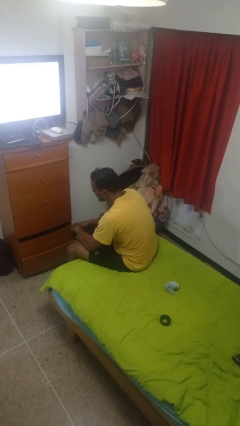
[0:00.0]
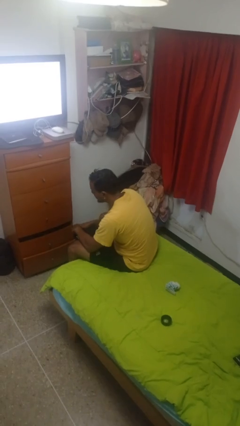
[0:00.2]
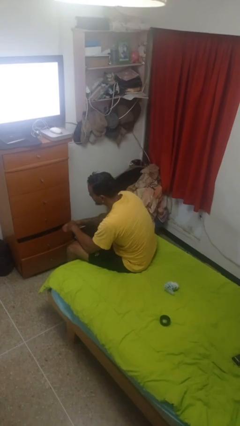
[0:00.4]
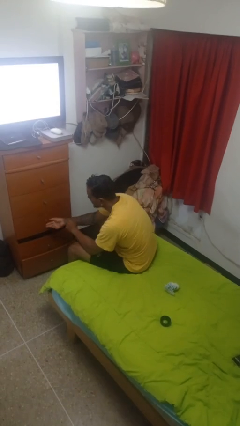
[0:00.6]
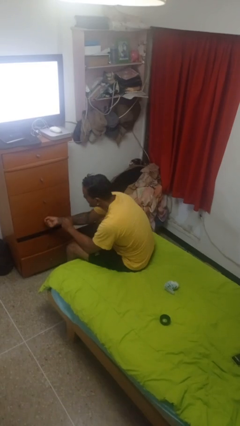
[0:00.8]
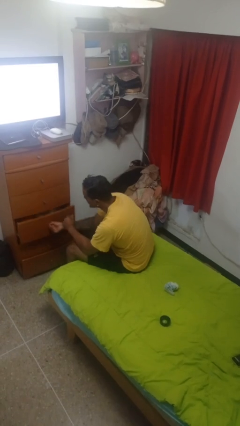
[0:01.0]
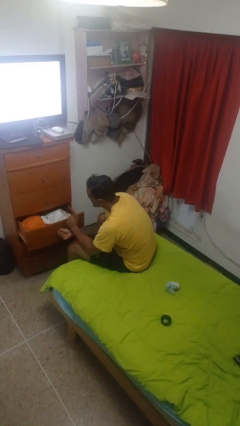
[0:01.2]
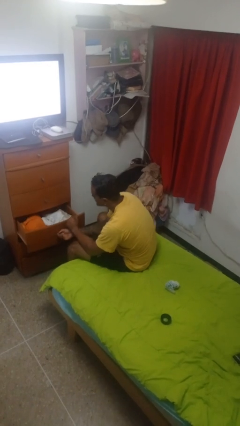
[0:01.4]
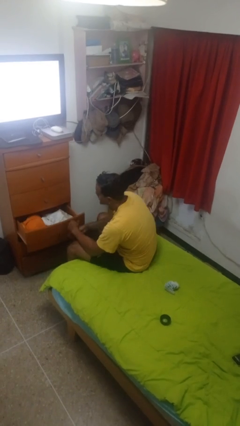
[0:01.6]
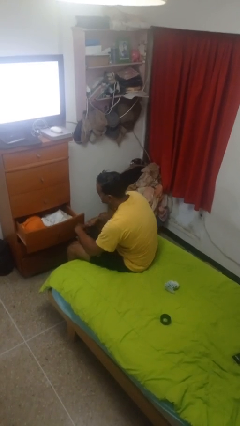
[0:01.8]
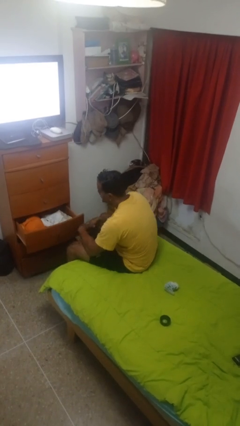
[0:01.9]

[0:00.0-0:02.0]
person opens dresser drawer

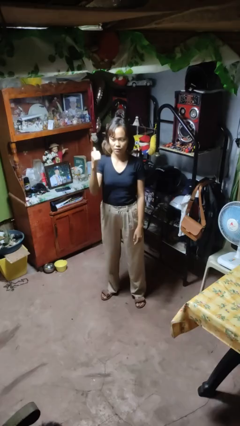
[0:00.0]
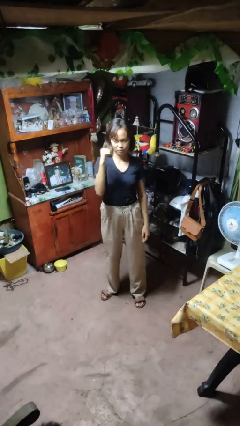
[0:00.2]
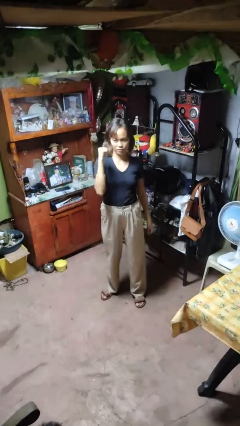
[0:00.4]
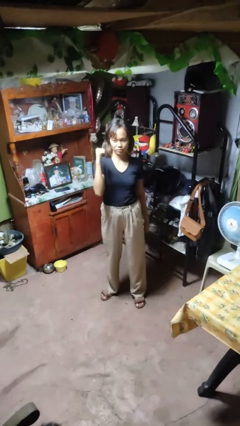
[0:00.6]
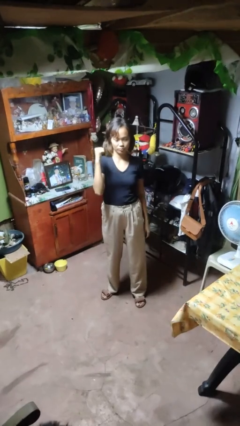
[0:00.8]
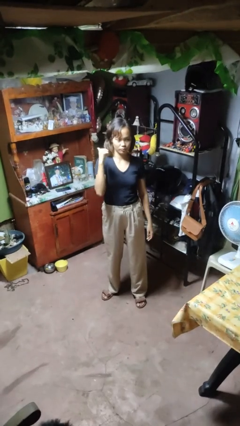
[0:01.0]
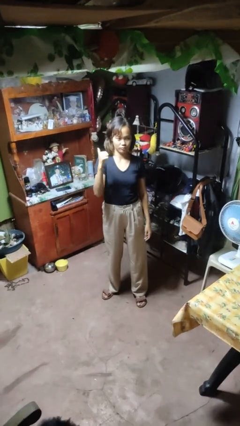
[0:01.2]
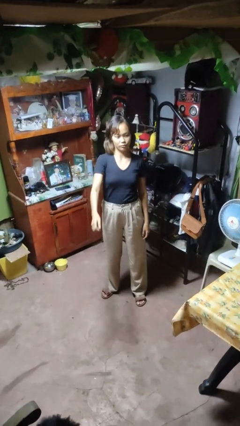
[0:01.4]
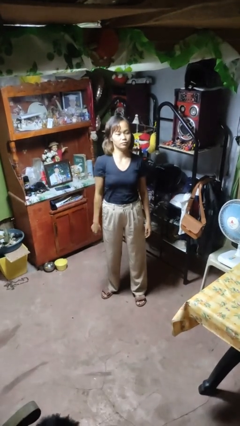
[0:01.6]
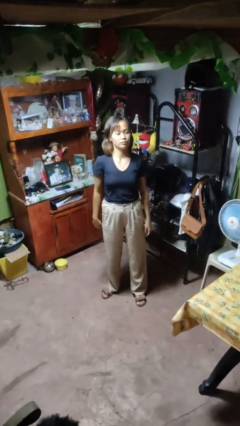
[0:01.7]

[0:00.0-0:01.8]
person gestures behind me

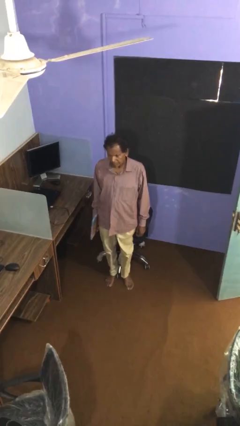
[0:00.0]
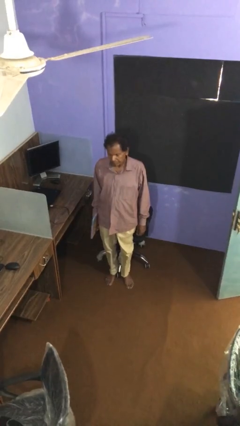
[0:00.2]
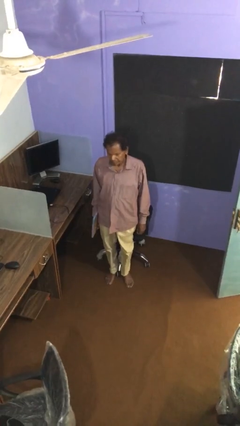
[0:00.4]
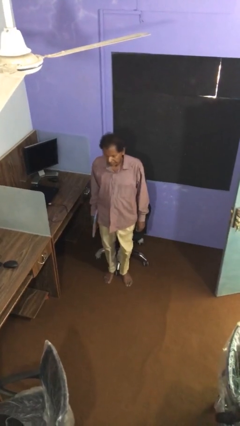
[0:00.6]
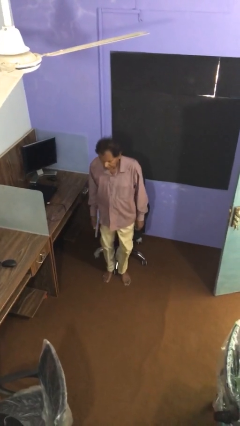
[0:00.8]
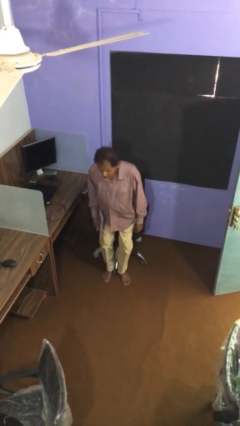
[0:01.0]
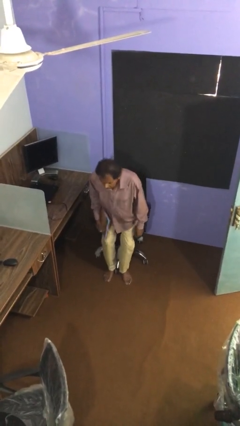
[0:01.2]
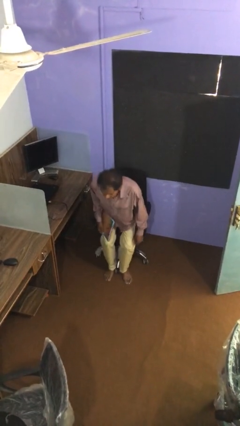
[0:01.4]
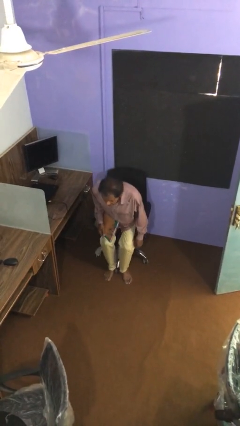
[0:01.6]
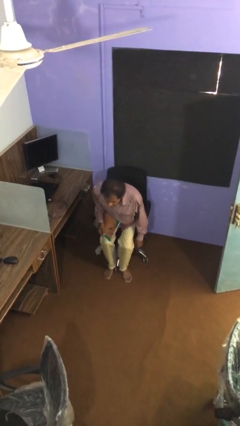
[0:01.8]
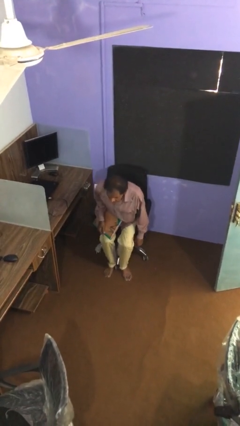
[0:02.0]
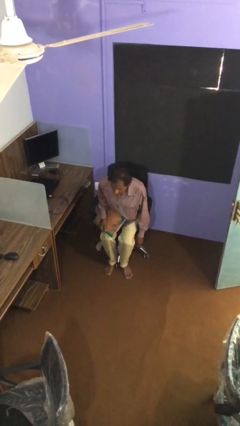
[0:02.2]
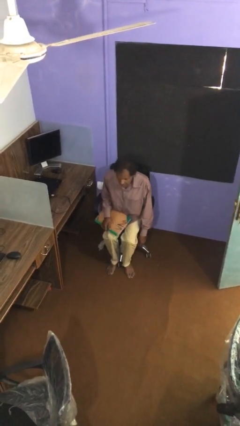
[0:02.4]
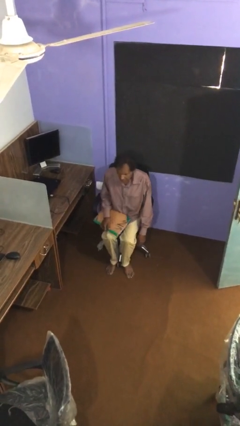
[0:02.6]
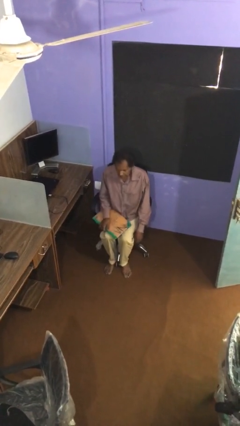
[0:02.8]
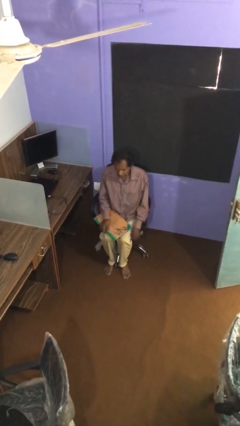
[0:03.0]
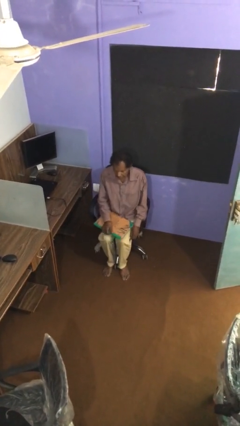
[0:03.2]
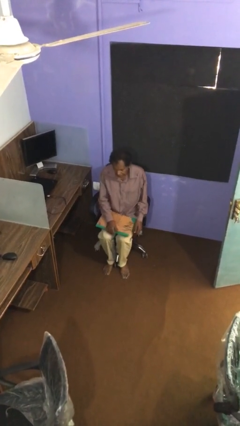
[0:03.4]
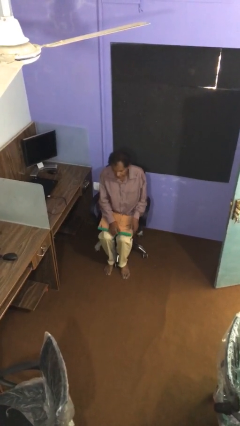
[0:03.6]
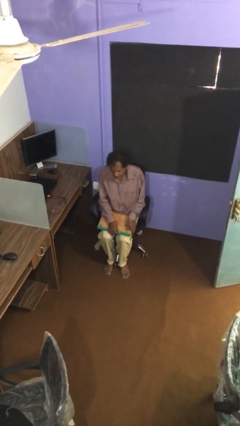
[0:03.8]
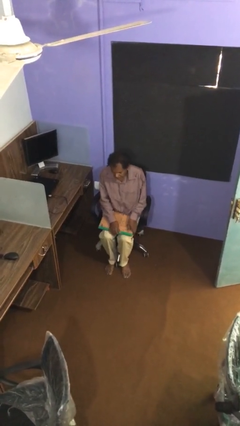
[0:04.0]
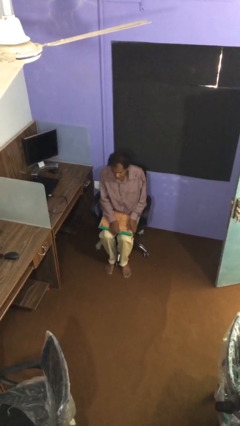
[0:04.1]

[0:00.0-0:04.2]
person sits down

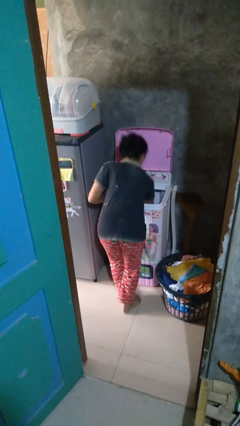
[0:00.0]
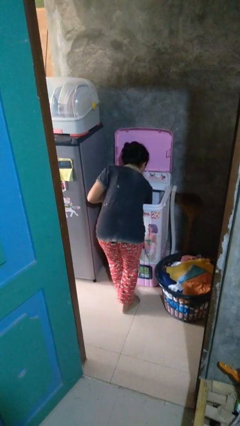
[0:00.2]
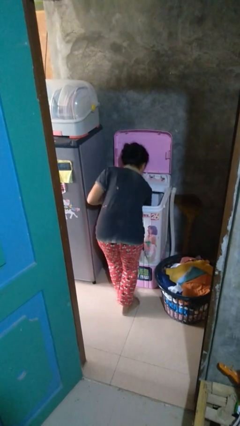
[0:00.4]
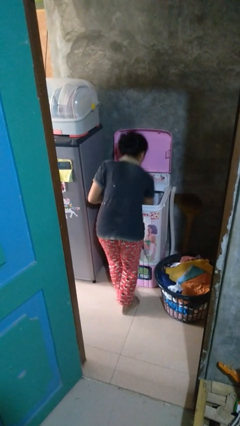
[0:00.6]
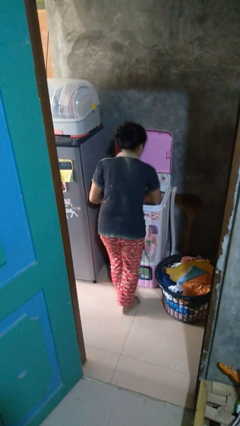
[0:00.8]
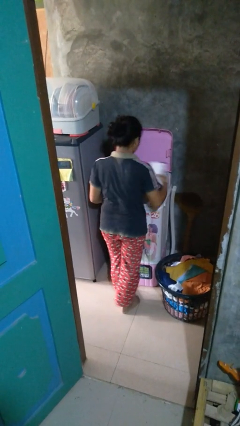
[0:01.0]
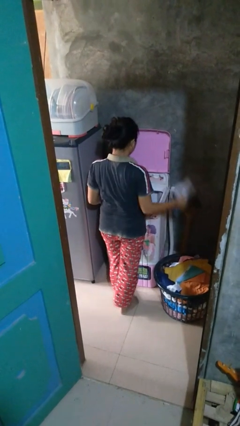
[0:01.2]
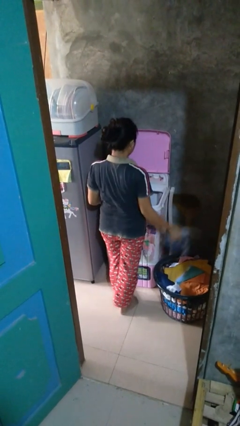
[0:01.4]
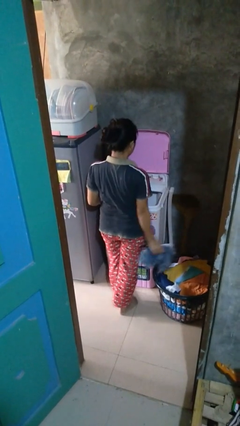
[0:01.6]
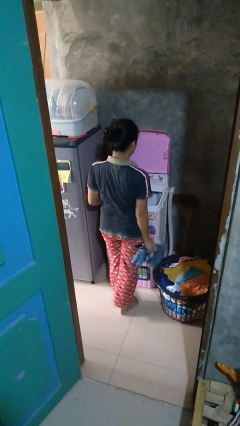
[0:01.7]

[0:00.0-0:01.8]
person unloads clotheswasher

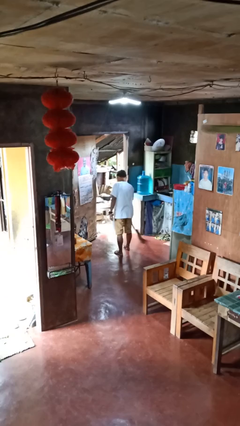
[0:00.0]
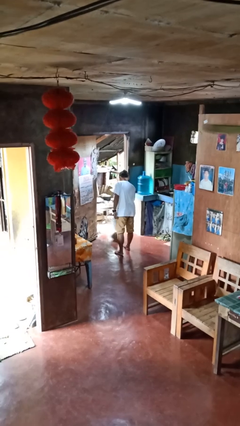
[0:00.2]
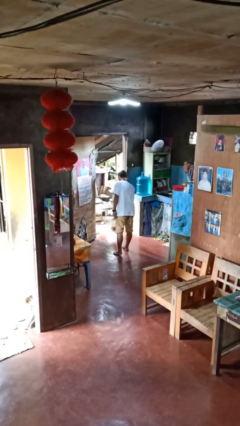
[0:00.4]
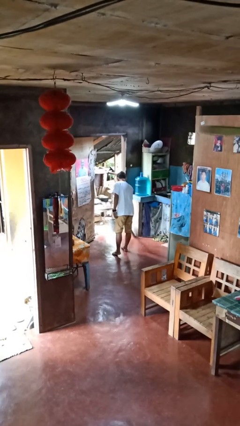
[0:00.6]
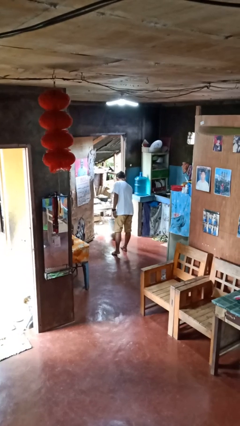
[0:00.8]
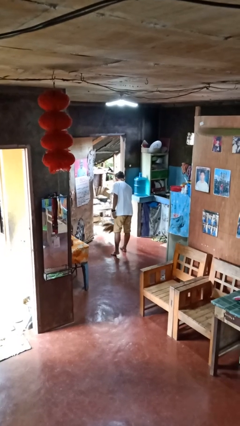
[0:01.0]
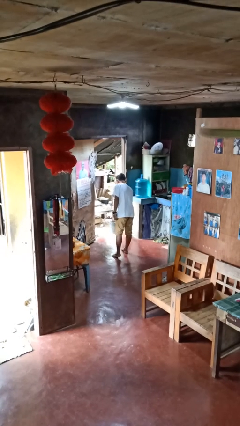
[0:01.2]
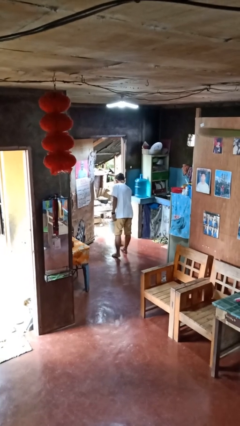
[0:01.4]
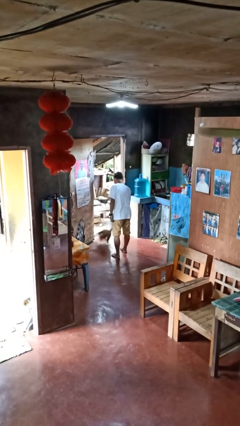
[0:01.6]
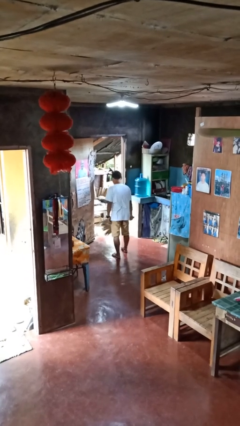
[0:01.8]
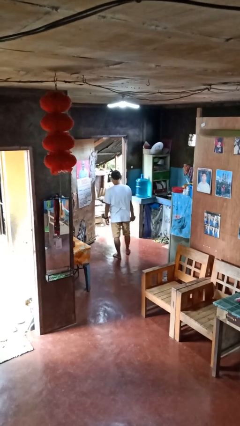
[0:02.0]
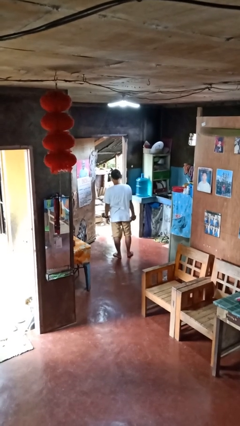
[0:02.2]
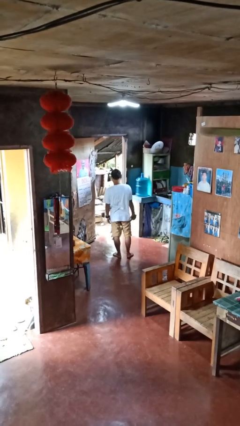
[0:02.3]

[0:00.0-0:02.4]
person sweeps floor

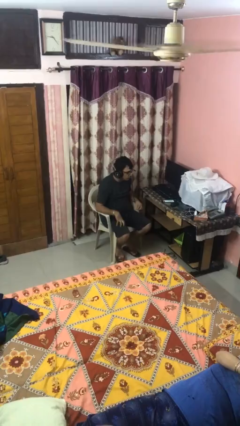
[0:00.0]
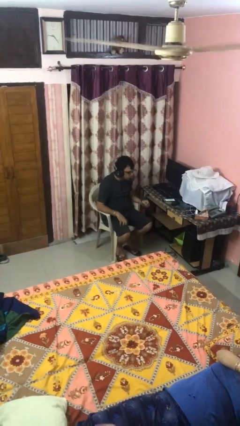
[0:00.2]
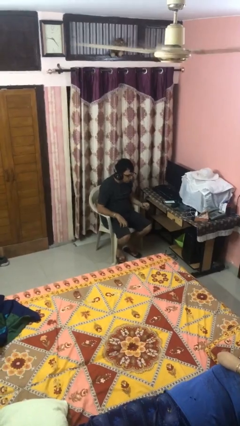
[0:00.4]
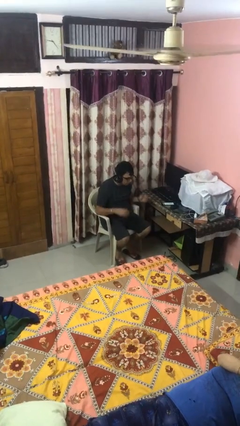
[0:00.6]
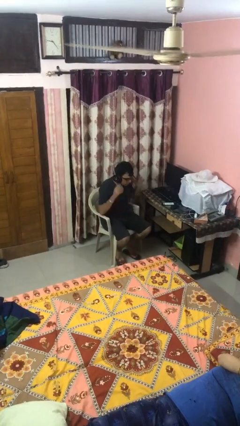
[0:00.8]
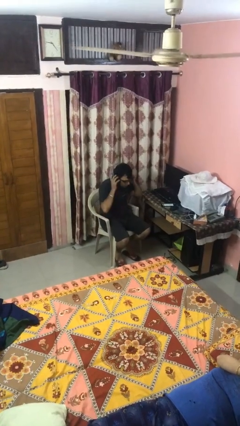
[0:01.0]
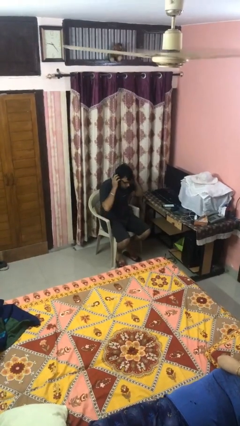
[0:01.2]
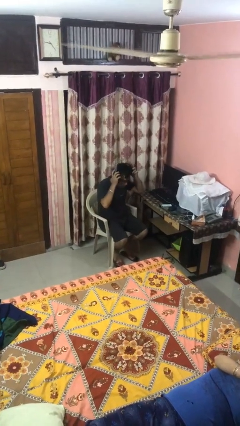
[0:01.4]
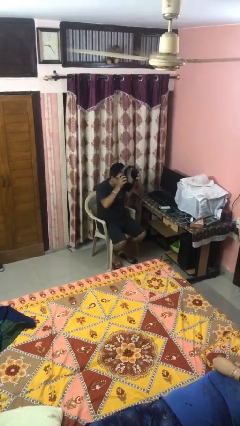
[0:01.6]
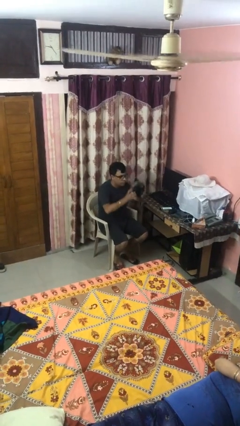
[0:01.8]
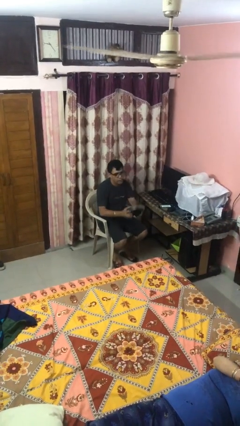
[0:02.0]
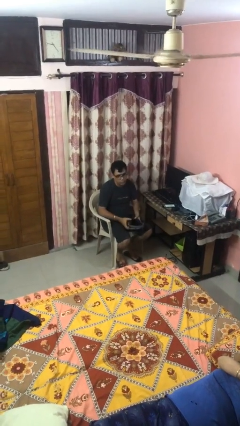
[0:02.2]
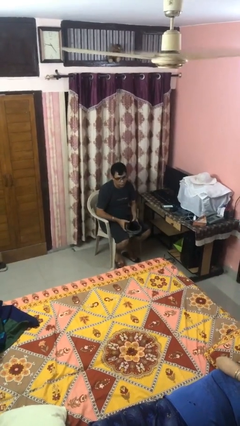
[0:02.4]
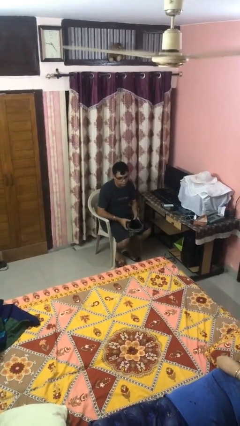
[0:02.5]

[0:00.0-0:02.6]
person takes off headphones

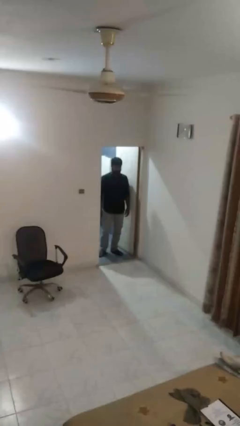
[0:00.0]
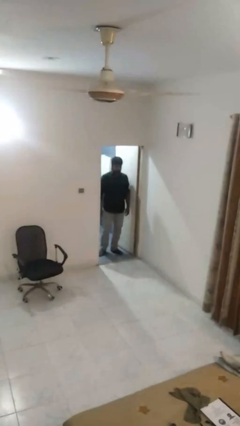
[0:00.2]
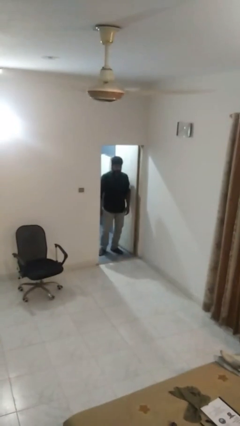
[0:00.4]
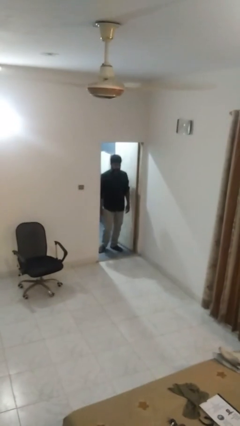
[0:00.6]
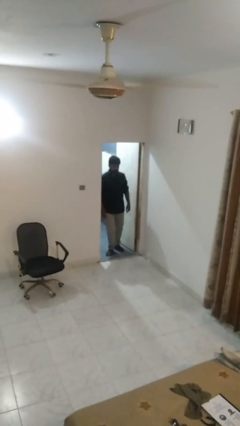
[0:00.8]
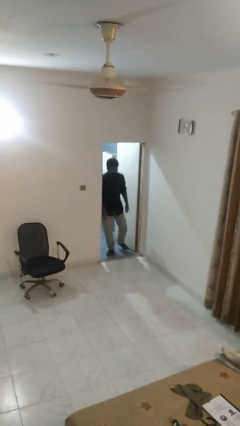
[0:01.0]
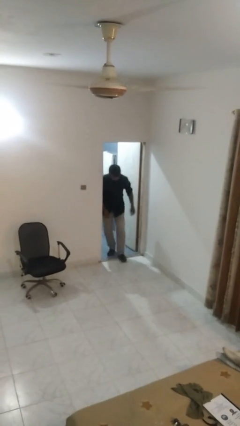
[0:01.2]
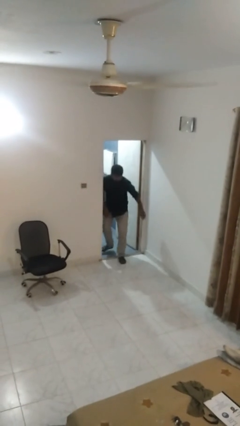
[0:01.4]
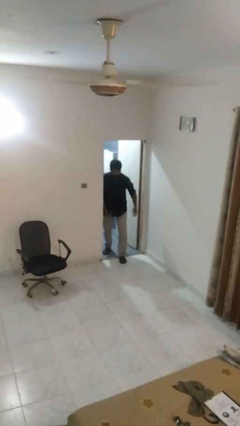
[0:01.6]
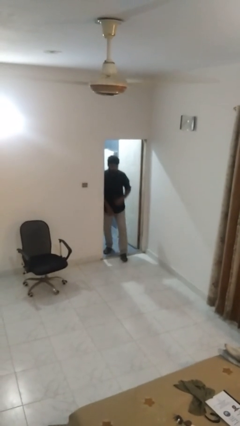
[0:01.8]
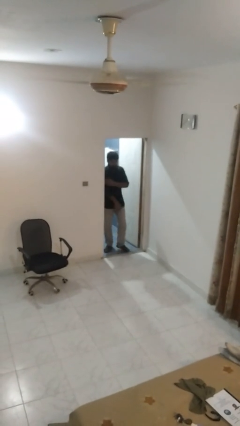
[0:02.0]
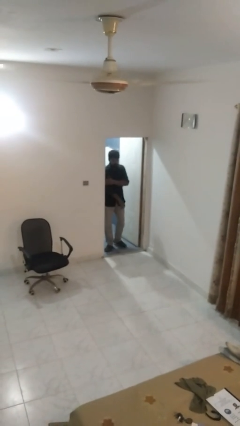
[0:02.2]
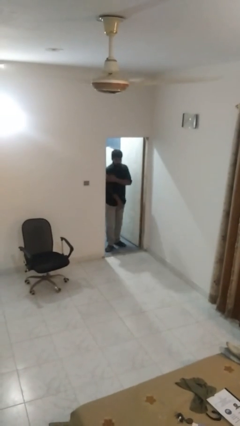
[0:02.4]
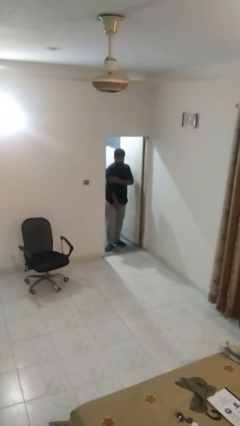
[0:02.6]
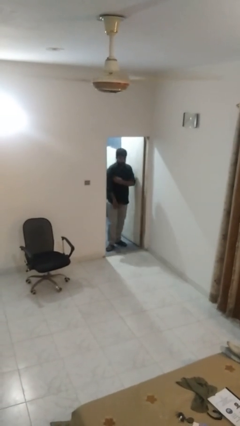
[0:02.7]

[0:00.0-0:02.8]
person bumps into wall
